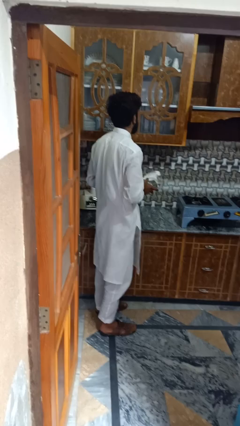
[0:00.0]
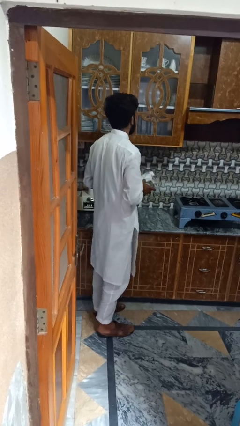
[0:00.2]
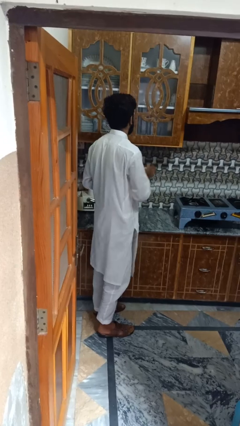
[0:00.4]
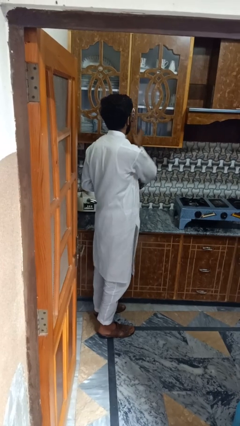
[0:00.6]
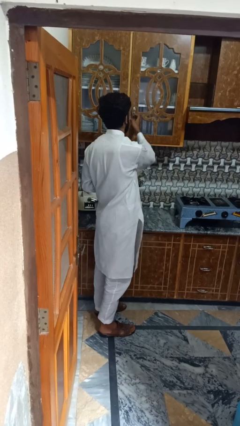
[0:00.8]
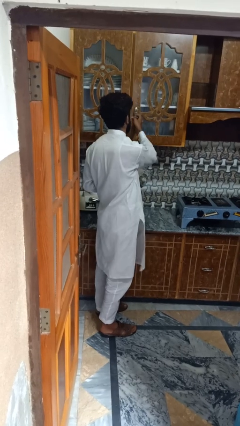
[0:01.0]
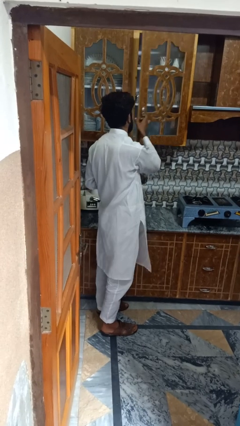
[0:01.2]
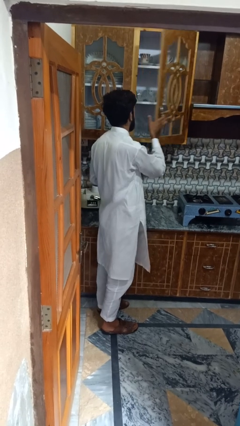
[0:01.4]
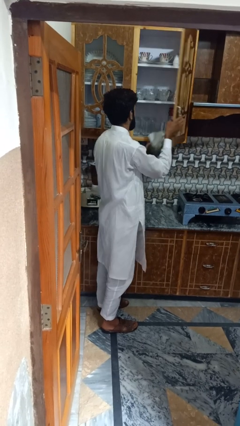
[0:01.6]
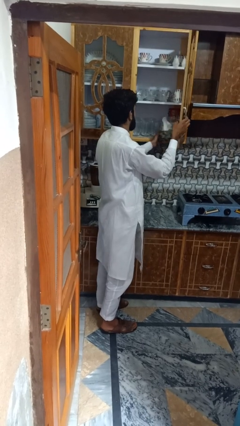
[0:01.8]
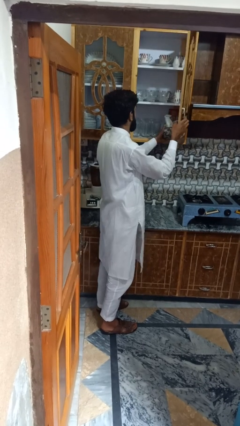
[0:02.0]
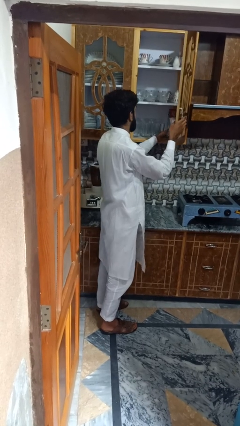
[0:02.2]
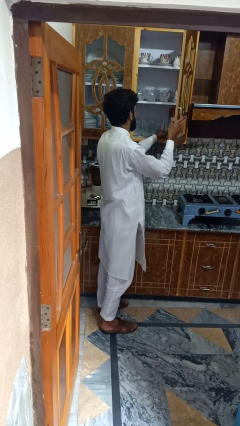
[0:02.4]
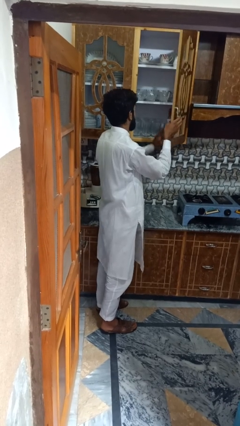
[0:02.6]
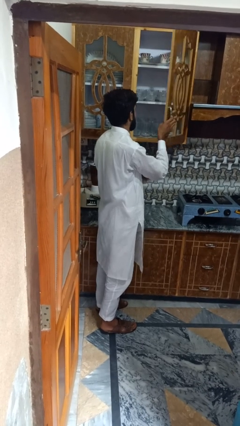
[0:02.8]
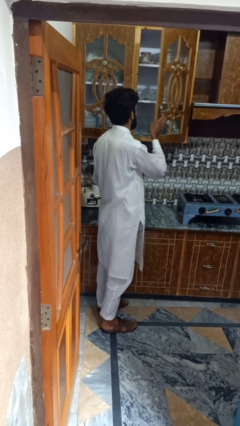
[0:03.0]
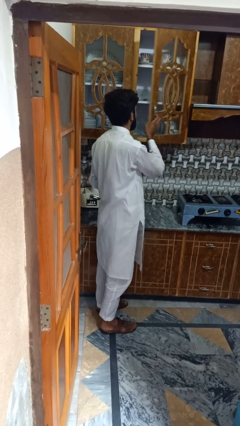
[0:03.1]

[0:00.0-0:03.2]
person takes object from kitchen drawer

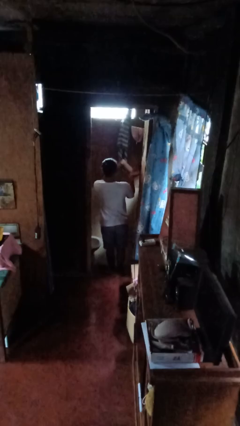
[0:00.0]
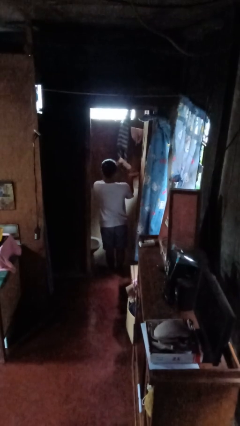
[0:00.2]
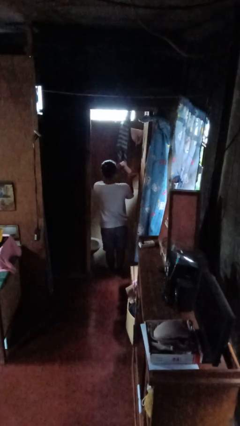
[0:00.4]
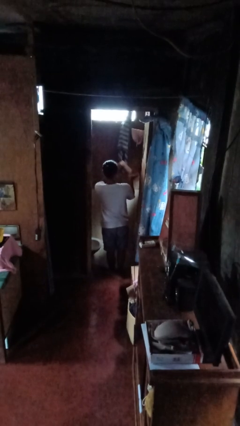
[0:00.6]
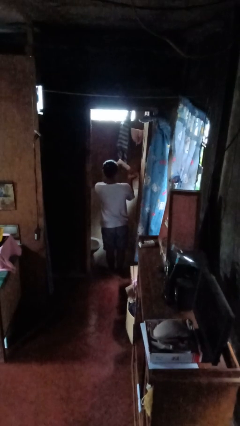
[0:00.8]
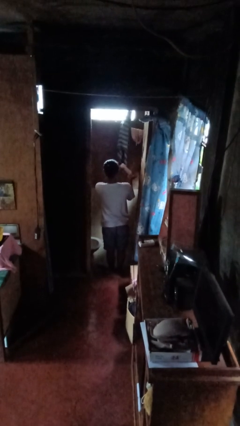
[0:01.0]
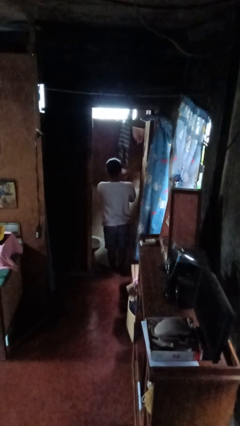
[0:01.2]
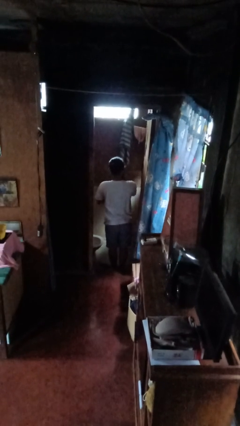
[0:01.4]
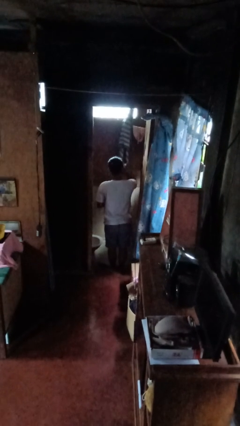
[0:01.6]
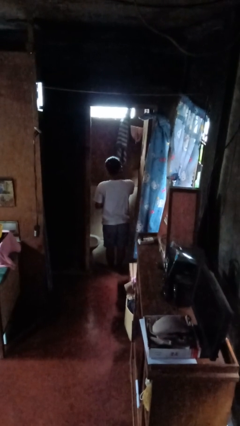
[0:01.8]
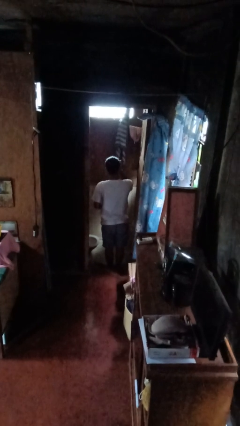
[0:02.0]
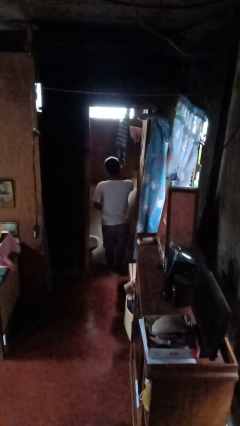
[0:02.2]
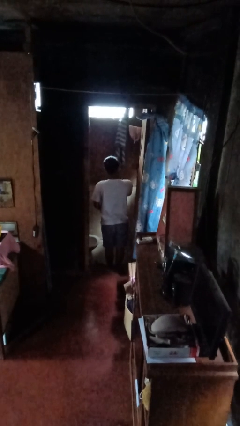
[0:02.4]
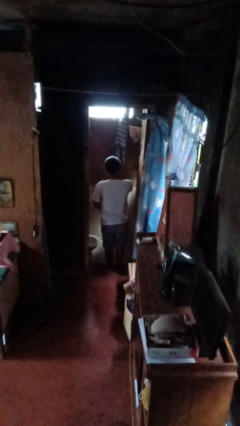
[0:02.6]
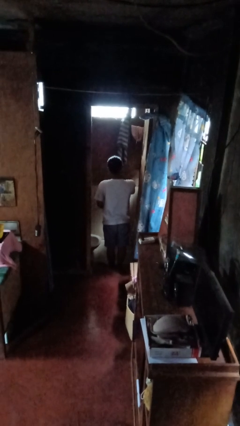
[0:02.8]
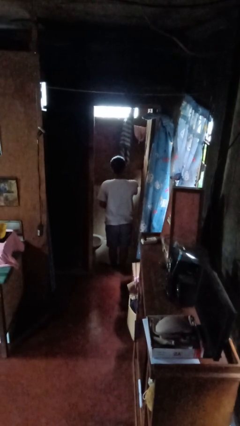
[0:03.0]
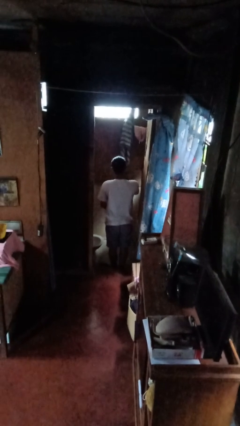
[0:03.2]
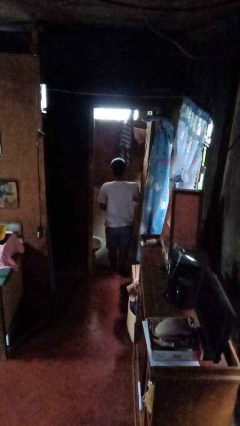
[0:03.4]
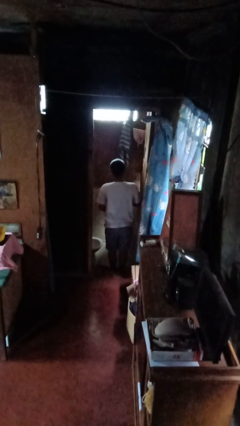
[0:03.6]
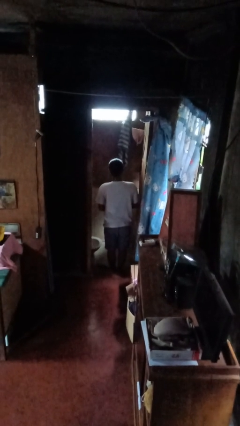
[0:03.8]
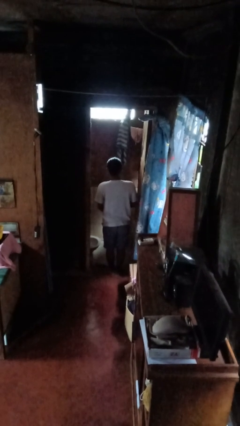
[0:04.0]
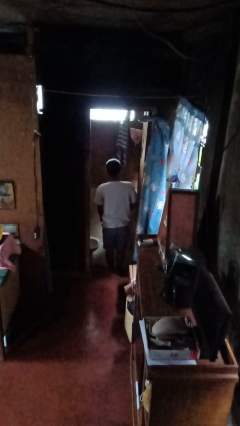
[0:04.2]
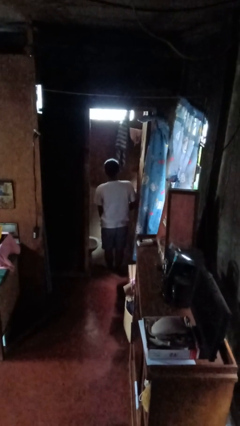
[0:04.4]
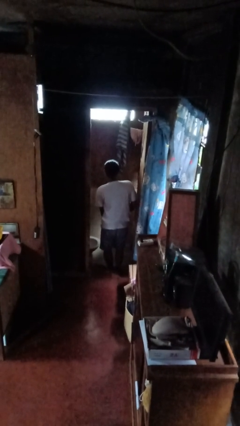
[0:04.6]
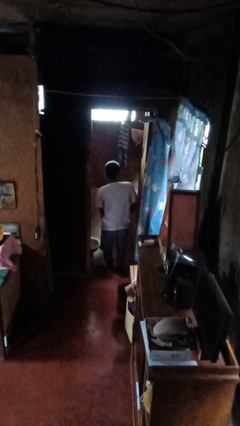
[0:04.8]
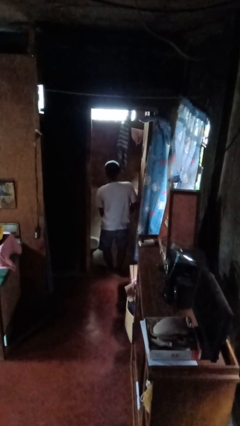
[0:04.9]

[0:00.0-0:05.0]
person applies shaving cream

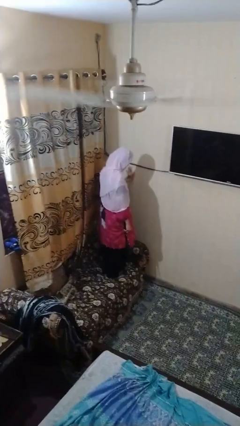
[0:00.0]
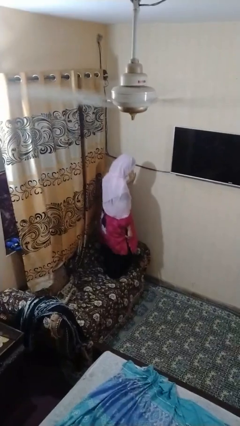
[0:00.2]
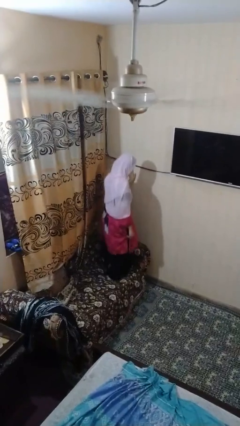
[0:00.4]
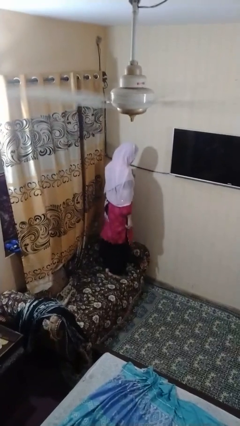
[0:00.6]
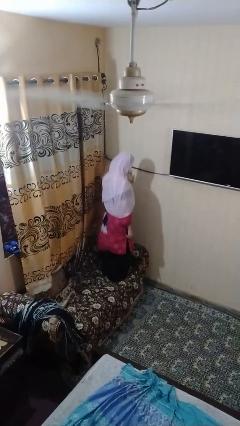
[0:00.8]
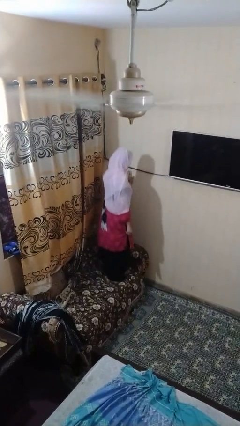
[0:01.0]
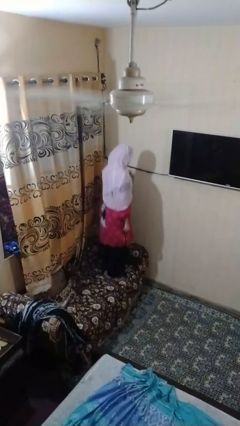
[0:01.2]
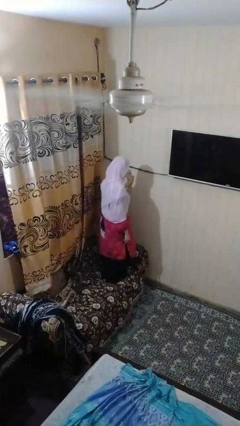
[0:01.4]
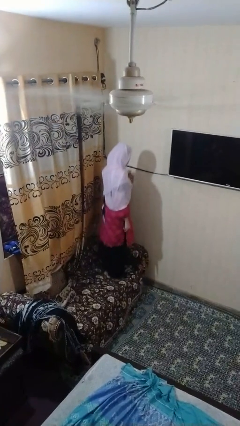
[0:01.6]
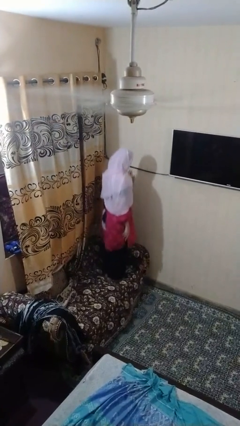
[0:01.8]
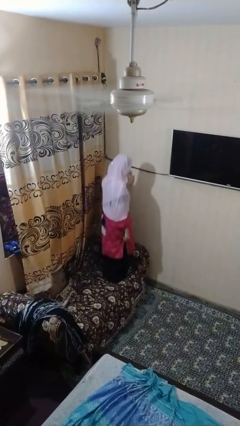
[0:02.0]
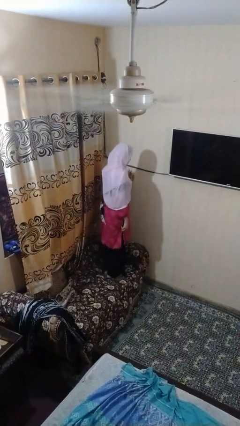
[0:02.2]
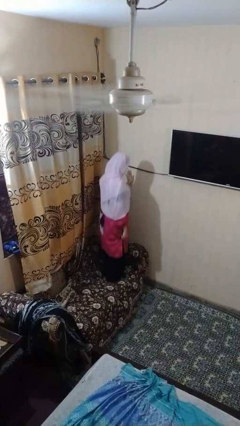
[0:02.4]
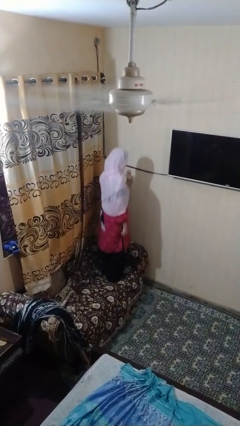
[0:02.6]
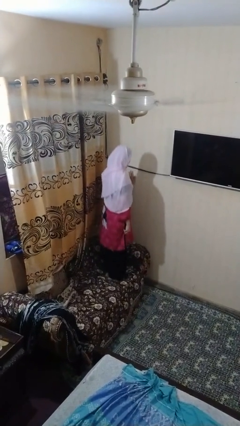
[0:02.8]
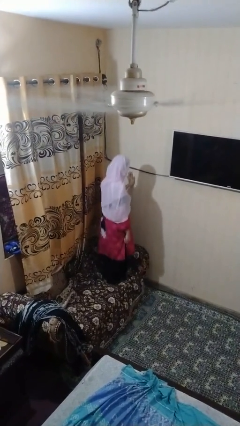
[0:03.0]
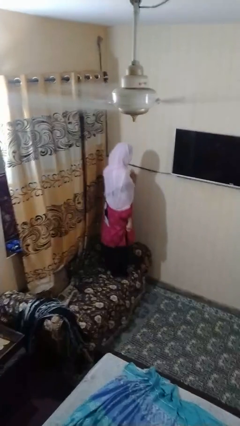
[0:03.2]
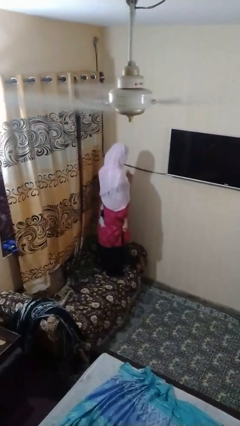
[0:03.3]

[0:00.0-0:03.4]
person jumps on couch

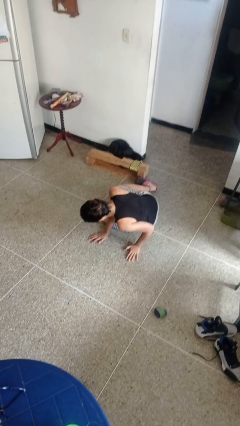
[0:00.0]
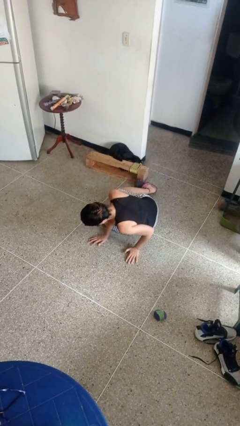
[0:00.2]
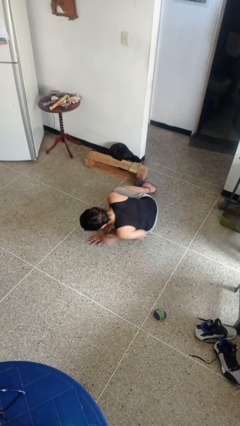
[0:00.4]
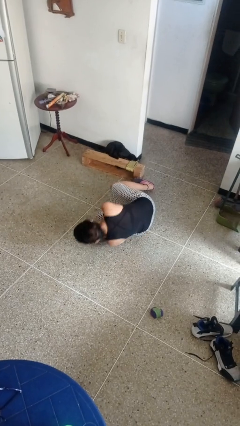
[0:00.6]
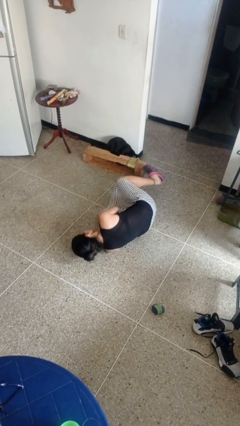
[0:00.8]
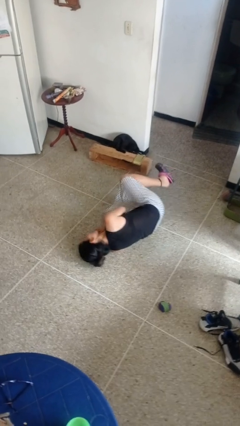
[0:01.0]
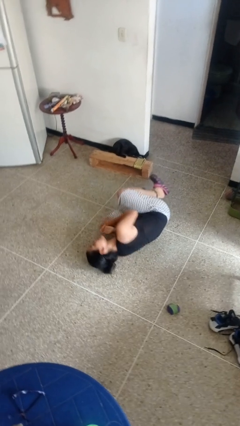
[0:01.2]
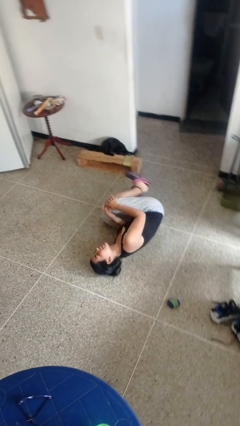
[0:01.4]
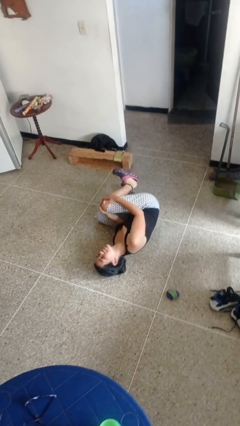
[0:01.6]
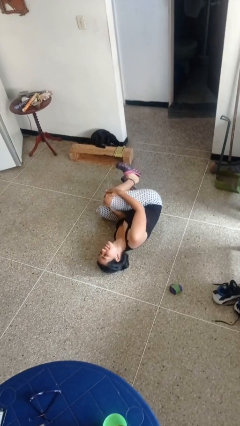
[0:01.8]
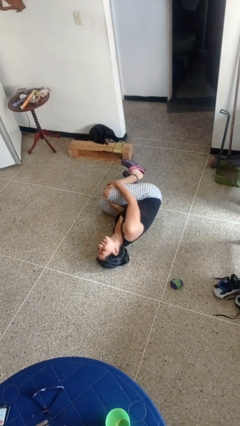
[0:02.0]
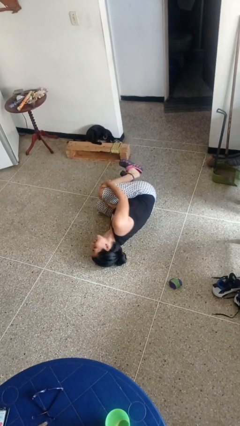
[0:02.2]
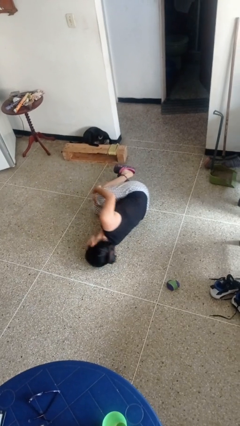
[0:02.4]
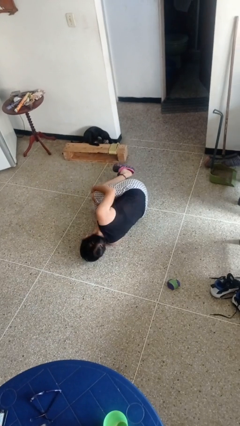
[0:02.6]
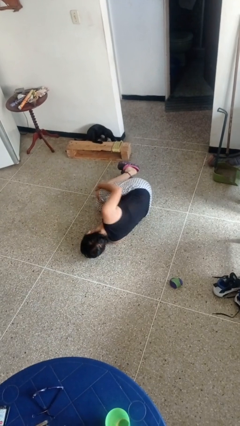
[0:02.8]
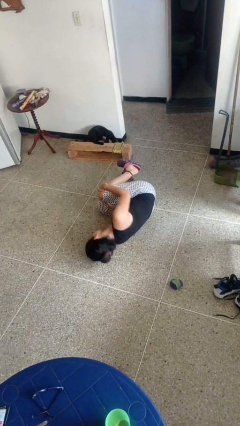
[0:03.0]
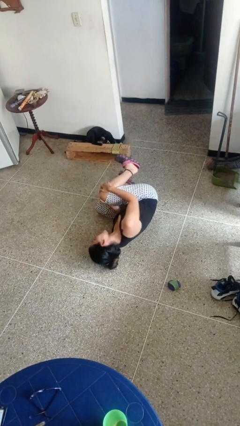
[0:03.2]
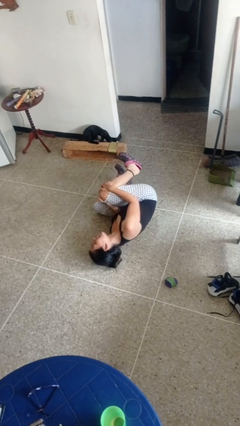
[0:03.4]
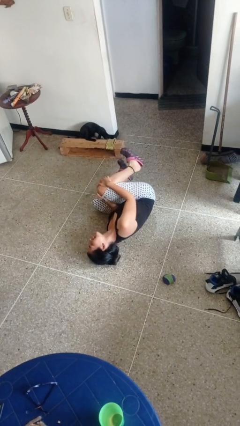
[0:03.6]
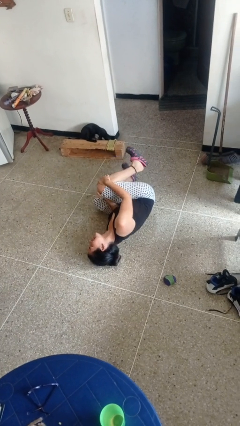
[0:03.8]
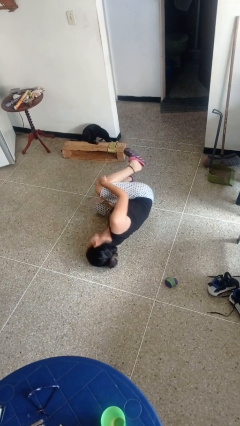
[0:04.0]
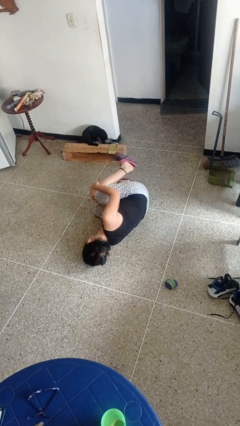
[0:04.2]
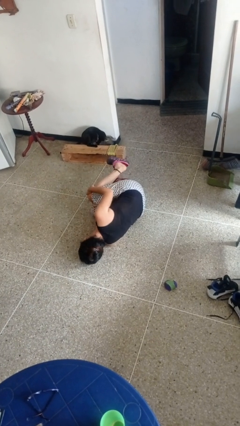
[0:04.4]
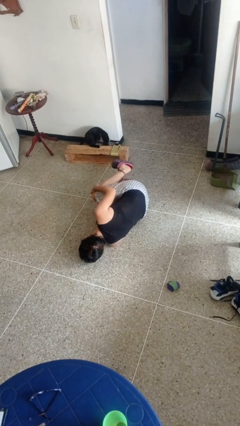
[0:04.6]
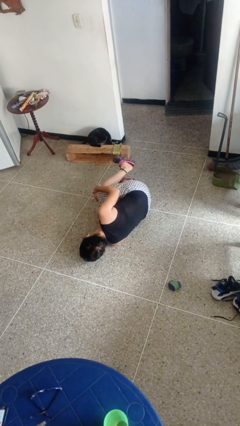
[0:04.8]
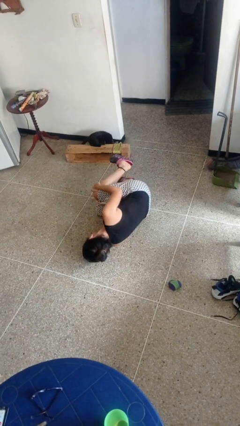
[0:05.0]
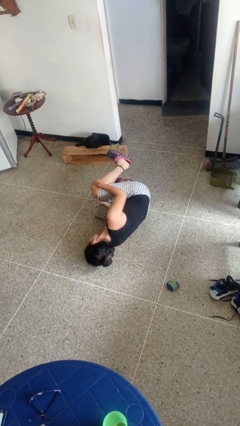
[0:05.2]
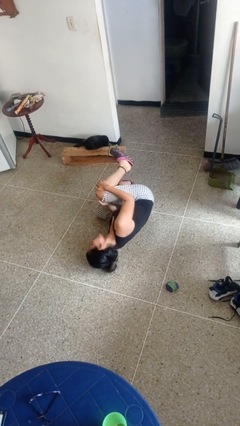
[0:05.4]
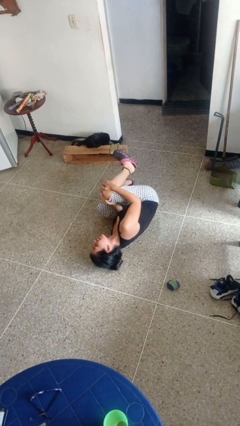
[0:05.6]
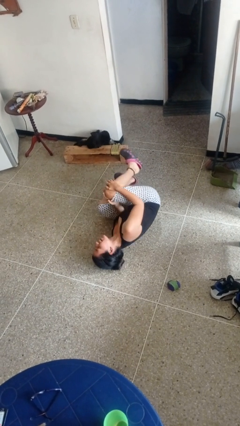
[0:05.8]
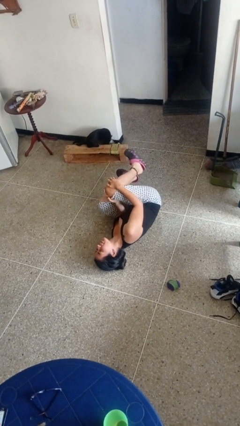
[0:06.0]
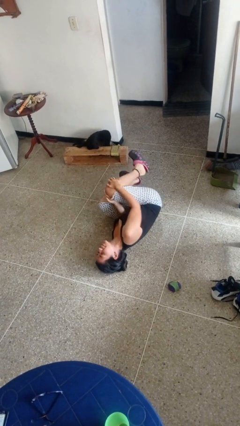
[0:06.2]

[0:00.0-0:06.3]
person lies down on floor
